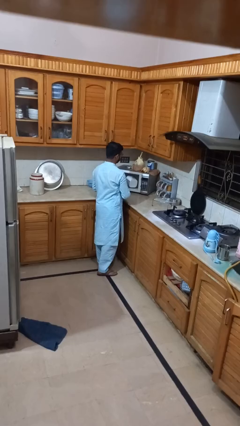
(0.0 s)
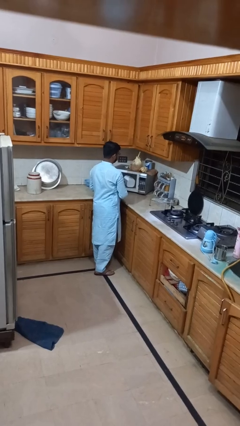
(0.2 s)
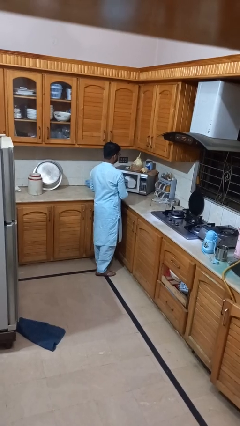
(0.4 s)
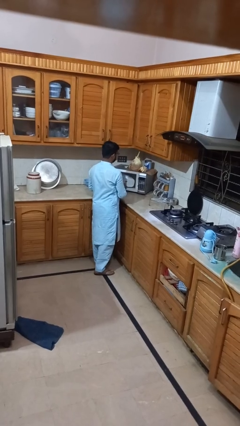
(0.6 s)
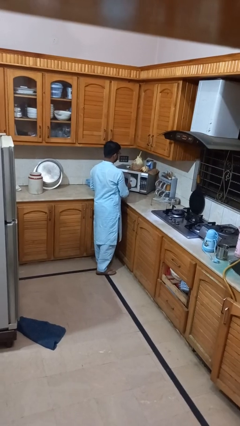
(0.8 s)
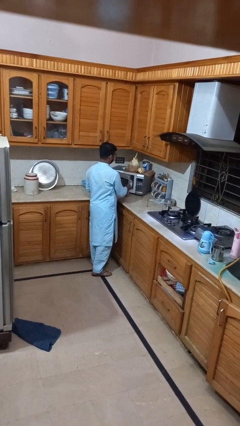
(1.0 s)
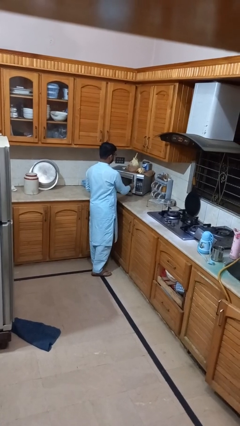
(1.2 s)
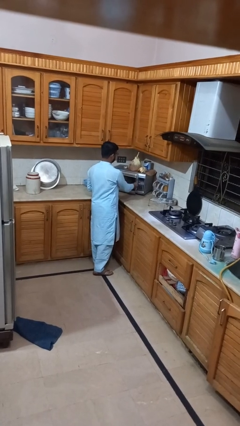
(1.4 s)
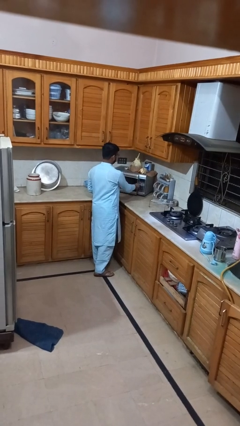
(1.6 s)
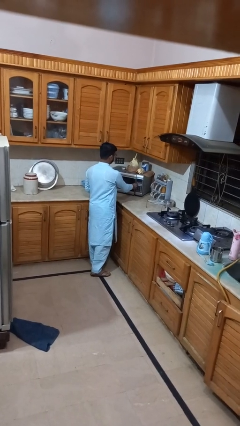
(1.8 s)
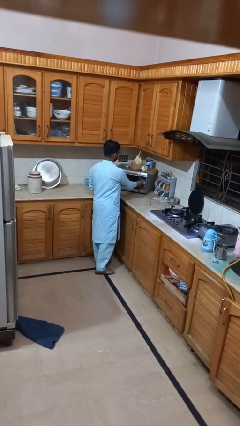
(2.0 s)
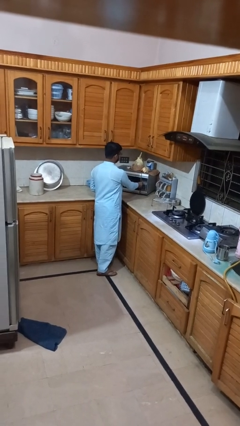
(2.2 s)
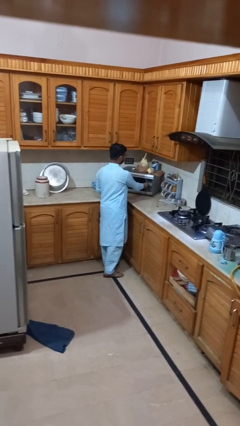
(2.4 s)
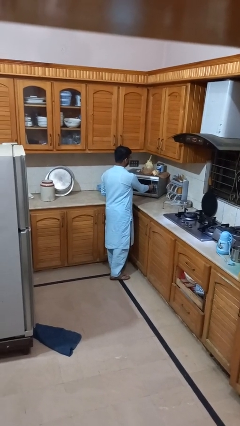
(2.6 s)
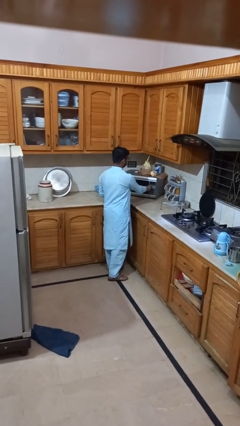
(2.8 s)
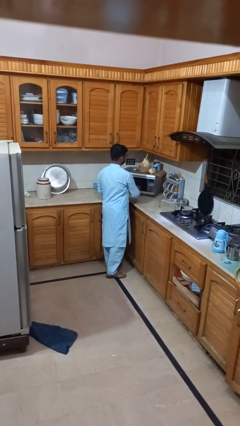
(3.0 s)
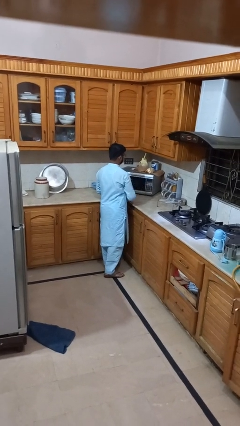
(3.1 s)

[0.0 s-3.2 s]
person closes microwave

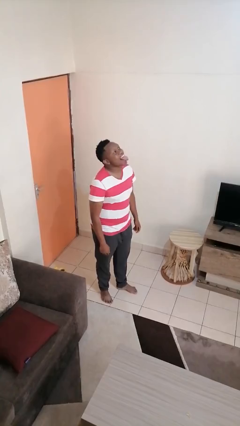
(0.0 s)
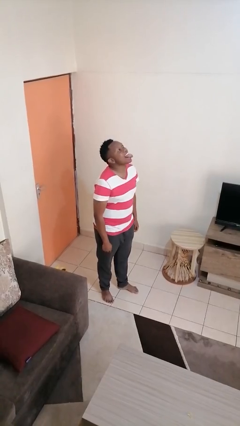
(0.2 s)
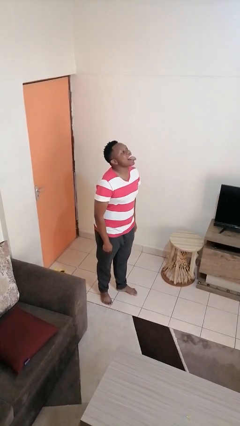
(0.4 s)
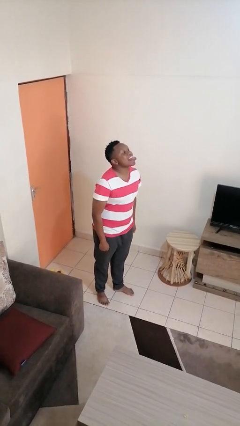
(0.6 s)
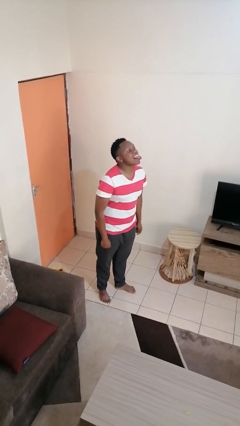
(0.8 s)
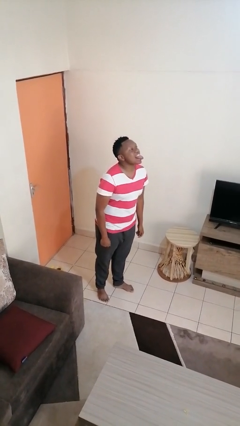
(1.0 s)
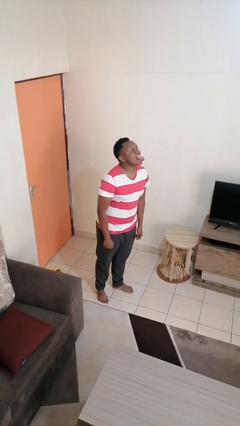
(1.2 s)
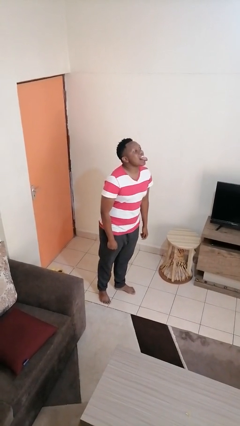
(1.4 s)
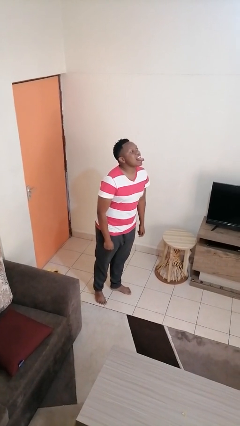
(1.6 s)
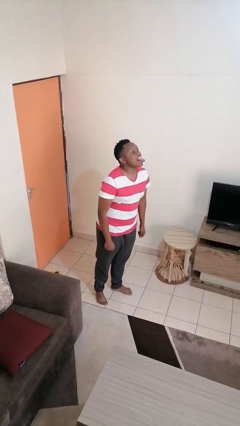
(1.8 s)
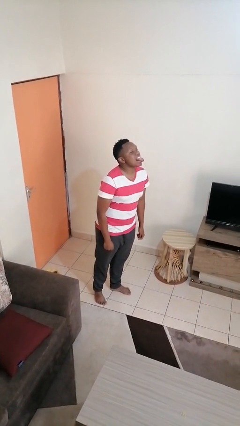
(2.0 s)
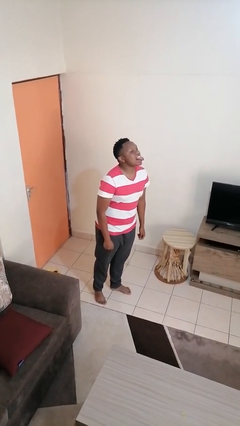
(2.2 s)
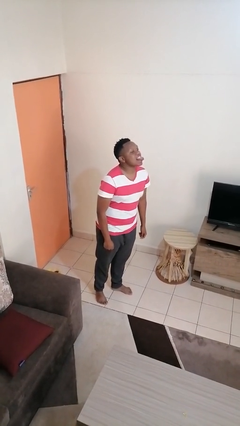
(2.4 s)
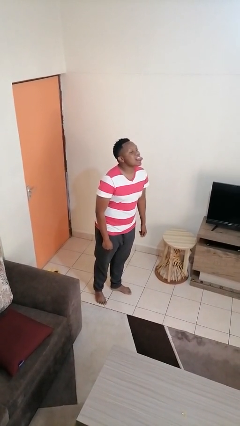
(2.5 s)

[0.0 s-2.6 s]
person sticks out tongue

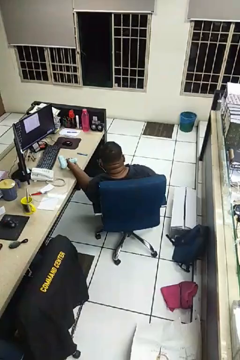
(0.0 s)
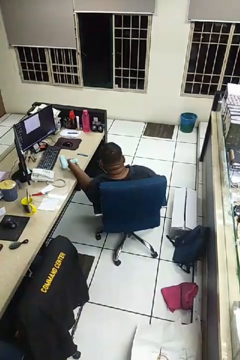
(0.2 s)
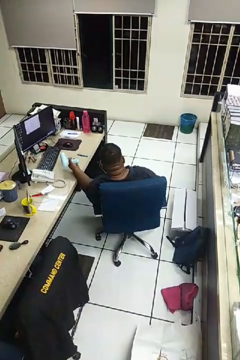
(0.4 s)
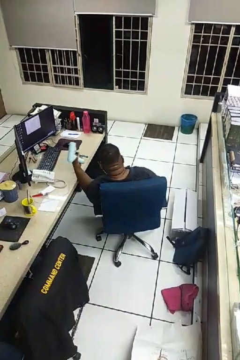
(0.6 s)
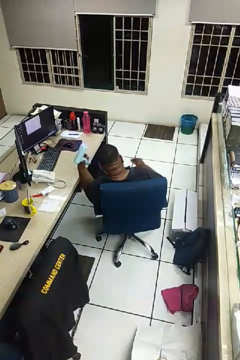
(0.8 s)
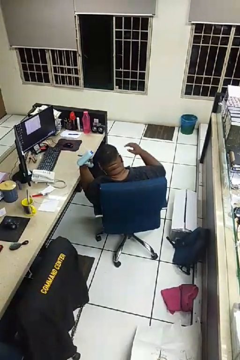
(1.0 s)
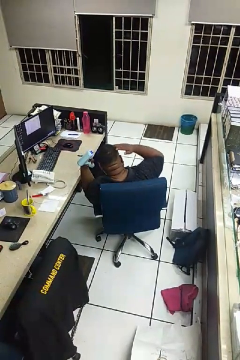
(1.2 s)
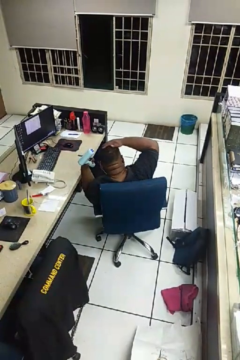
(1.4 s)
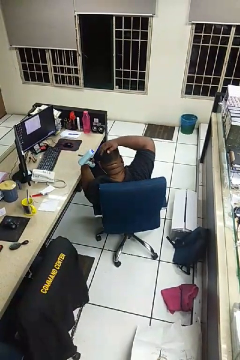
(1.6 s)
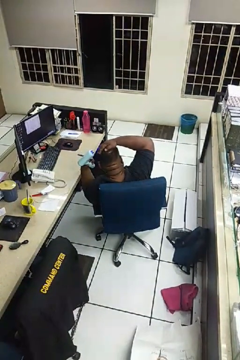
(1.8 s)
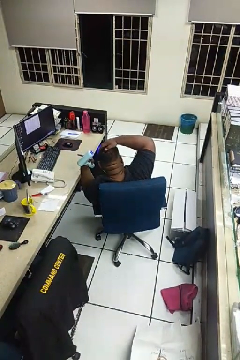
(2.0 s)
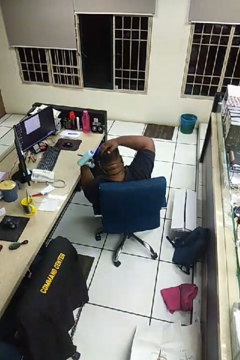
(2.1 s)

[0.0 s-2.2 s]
person dries hair with hairdryer

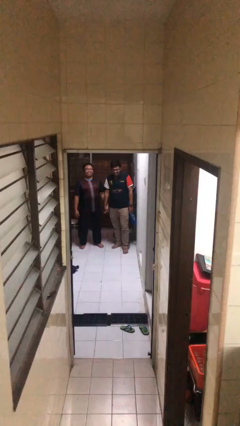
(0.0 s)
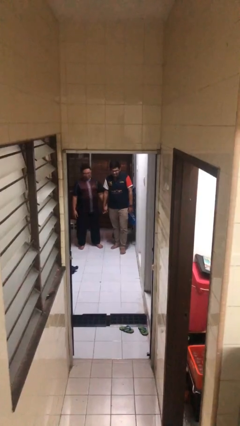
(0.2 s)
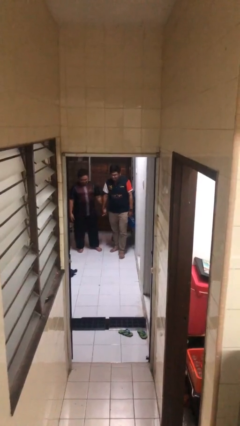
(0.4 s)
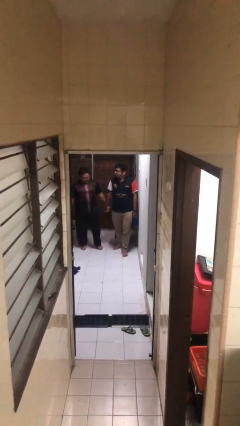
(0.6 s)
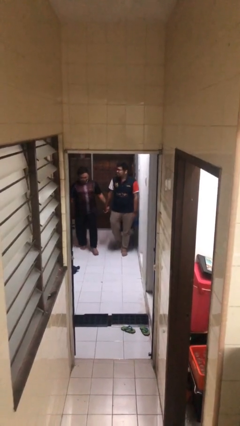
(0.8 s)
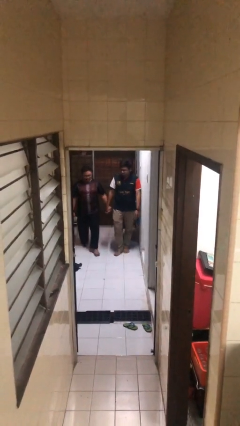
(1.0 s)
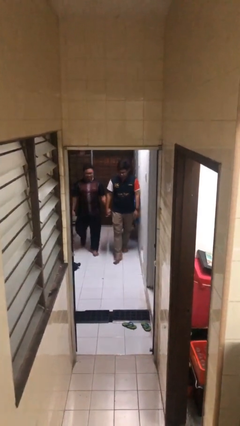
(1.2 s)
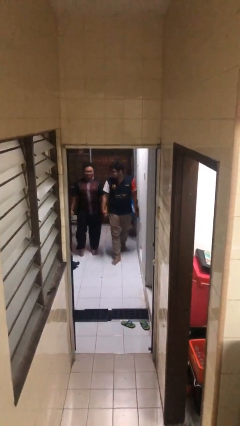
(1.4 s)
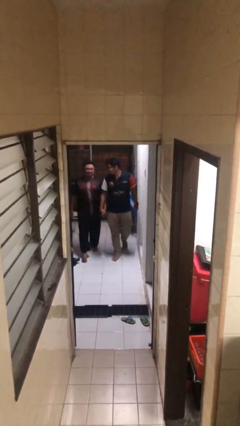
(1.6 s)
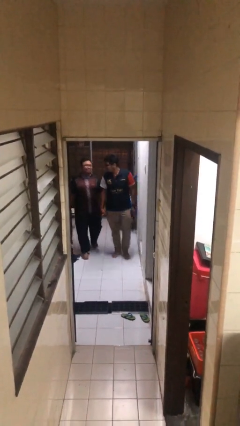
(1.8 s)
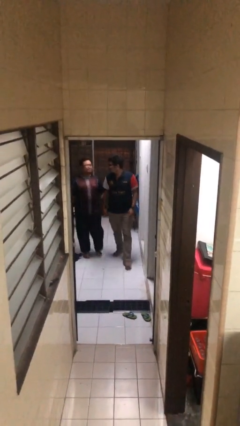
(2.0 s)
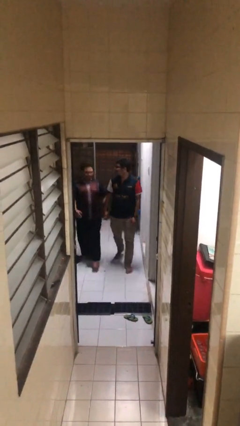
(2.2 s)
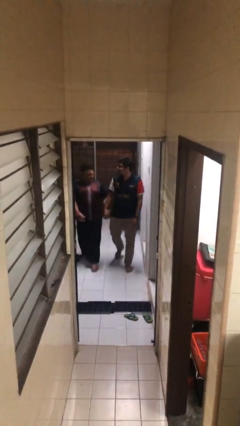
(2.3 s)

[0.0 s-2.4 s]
person holds hand

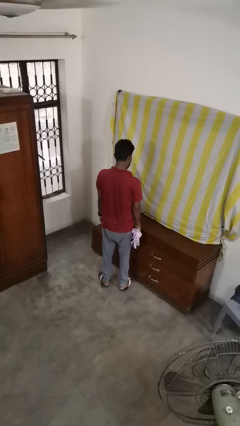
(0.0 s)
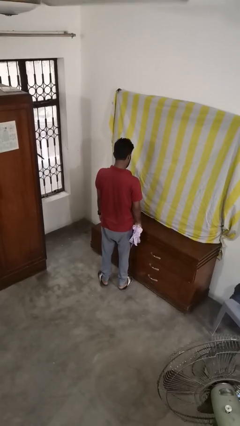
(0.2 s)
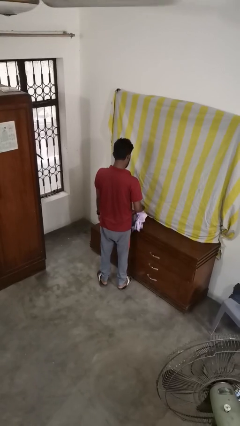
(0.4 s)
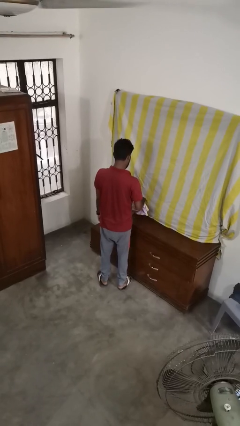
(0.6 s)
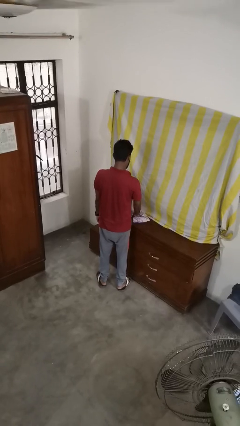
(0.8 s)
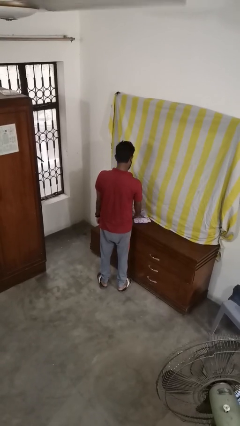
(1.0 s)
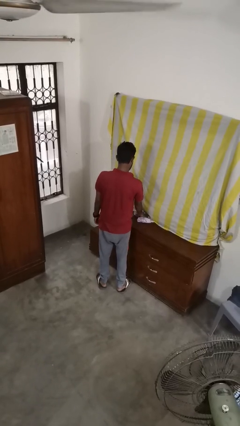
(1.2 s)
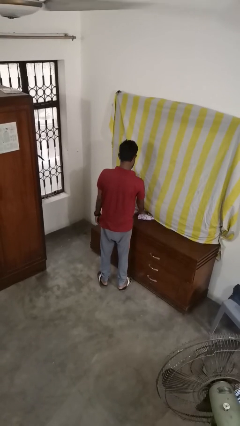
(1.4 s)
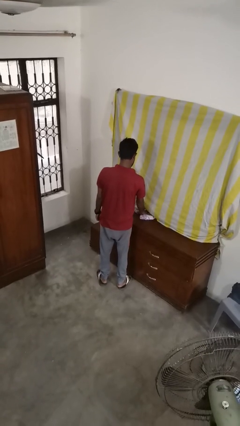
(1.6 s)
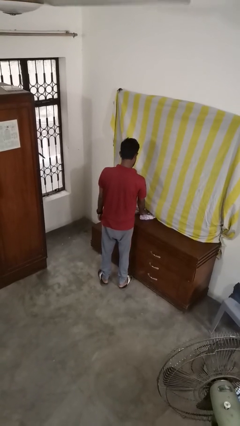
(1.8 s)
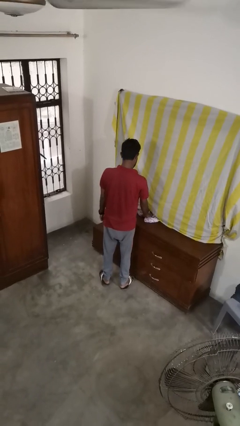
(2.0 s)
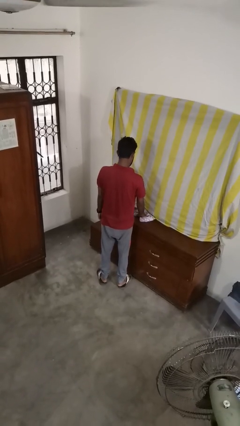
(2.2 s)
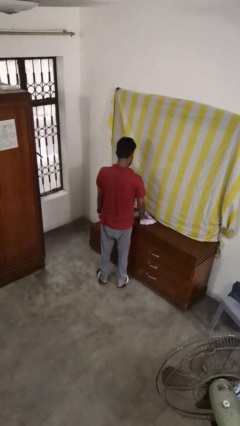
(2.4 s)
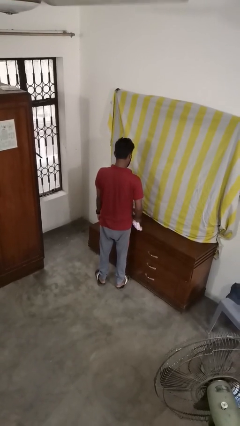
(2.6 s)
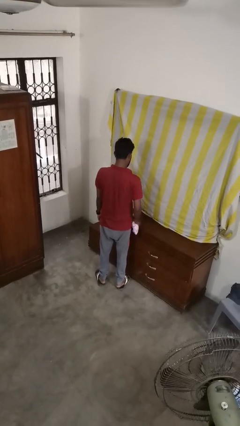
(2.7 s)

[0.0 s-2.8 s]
person cleans table with rag

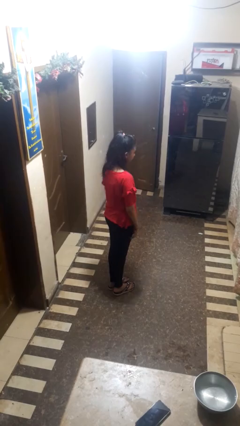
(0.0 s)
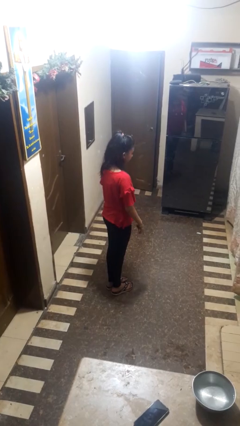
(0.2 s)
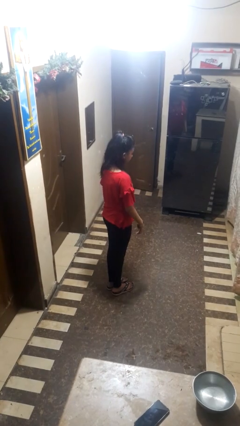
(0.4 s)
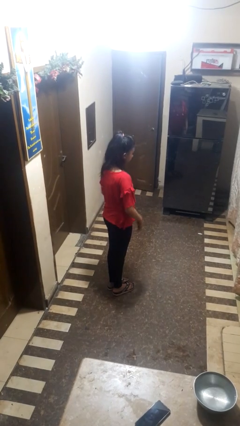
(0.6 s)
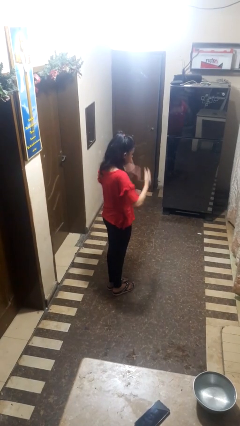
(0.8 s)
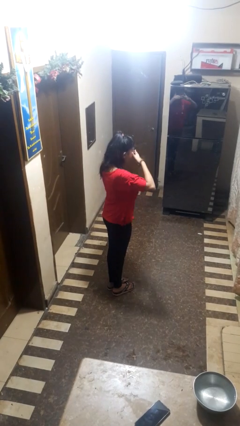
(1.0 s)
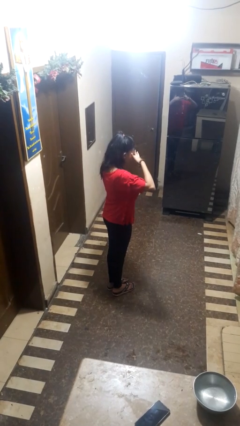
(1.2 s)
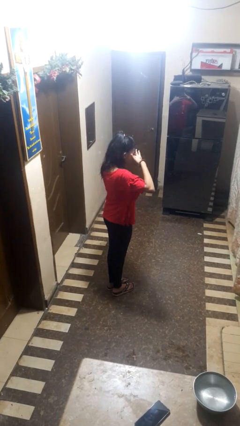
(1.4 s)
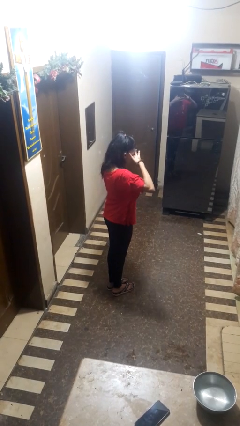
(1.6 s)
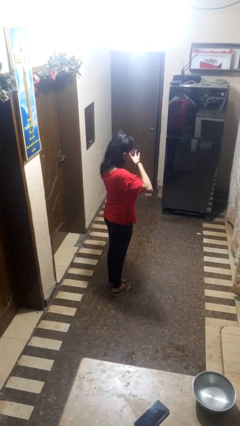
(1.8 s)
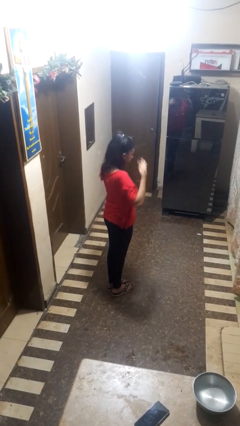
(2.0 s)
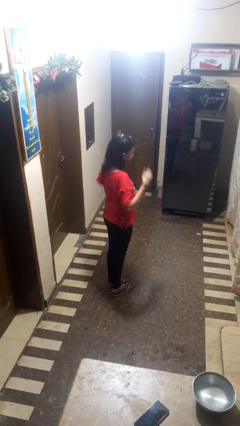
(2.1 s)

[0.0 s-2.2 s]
person rubs eyes

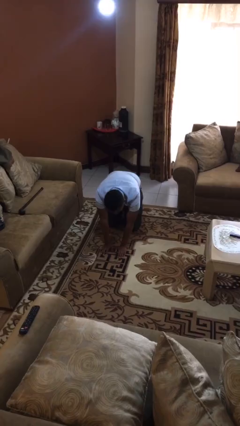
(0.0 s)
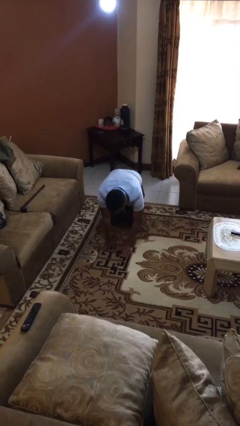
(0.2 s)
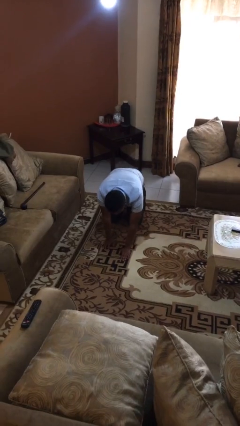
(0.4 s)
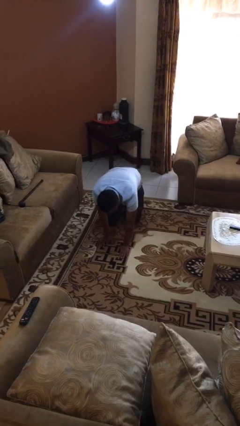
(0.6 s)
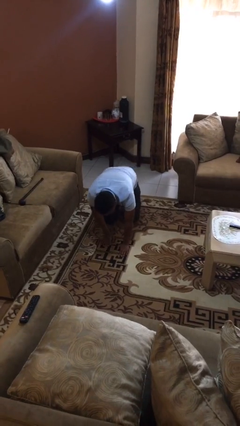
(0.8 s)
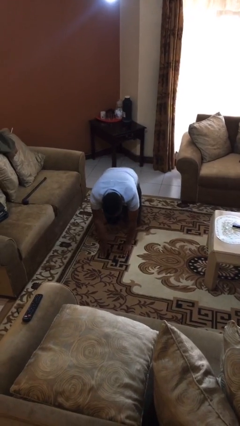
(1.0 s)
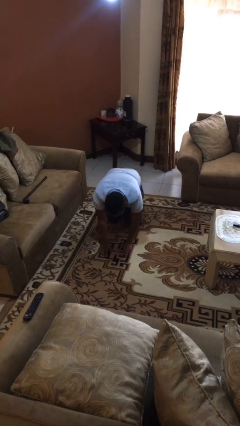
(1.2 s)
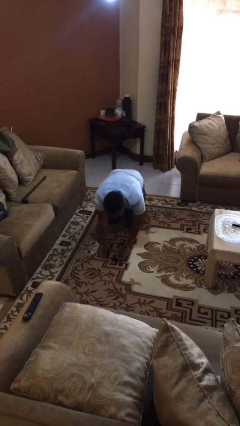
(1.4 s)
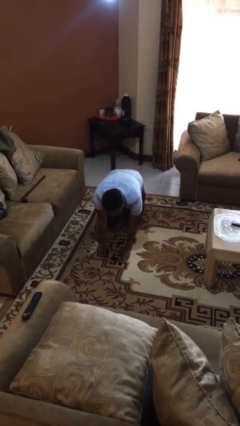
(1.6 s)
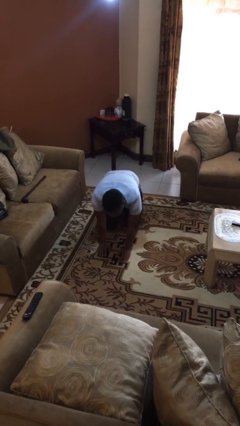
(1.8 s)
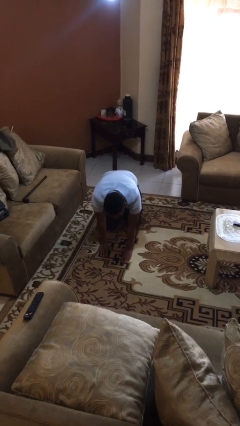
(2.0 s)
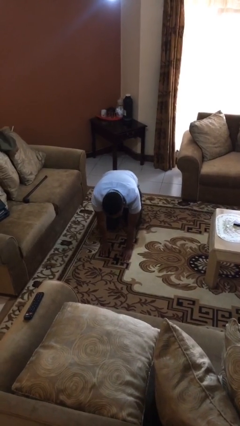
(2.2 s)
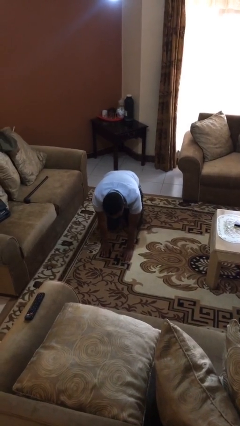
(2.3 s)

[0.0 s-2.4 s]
person crawls
